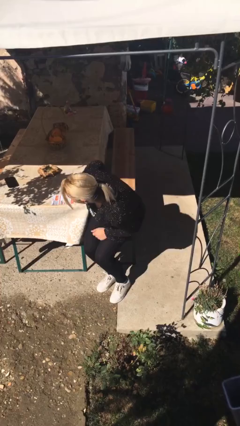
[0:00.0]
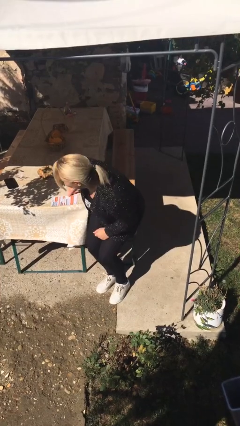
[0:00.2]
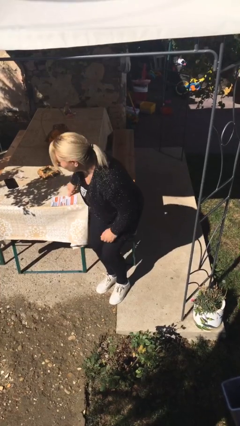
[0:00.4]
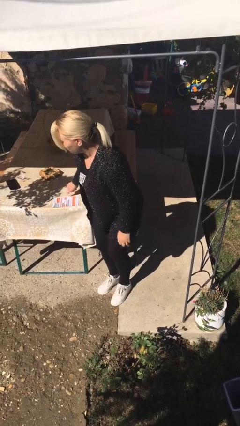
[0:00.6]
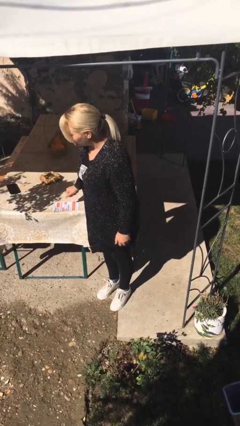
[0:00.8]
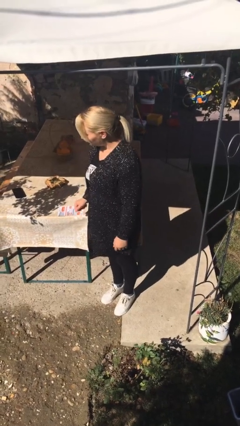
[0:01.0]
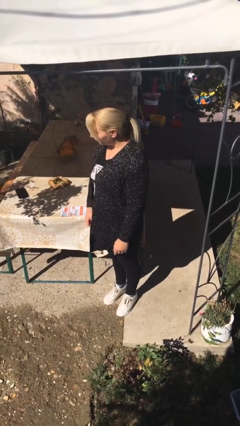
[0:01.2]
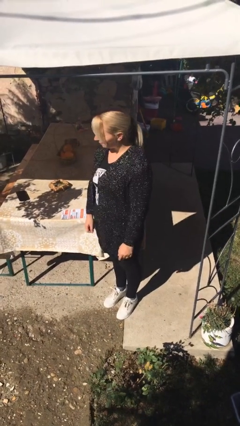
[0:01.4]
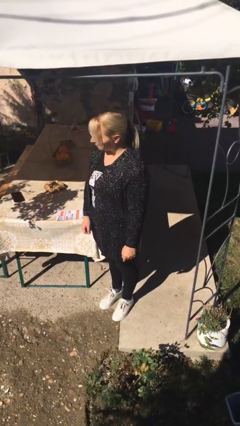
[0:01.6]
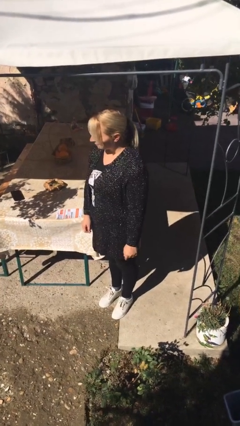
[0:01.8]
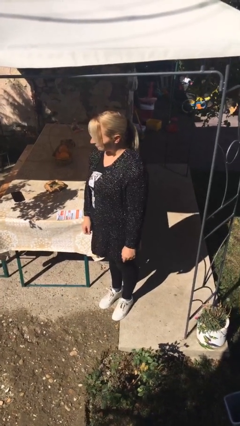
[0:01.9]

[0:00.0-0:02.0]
person stands up

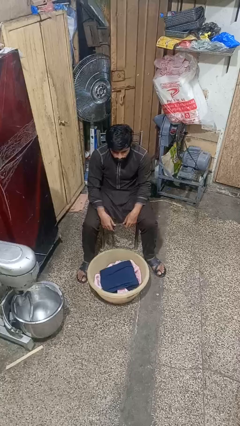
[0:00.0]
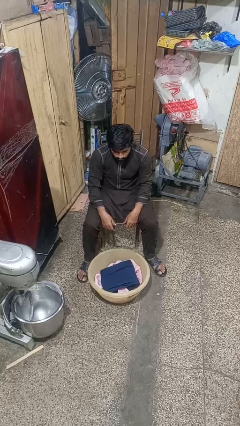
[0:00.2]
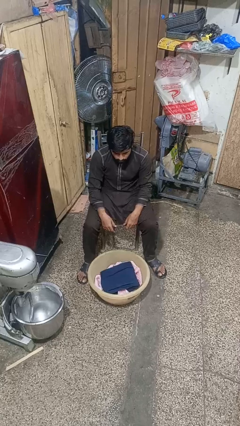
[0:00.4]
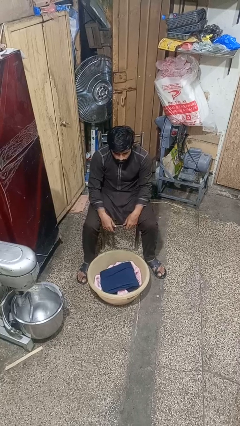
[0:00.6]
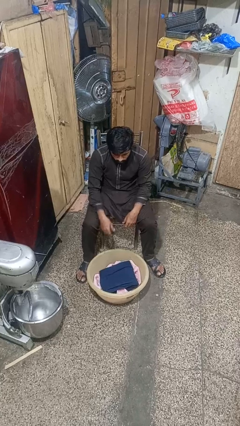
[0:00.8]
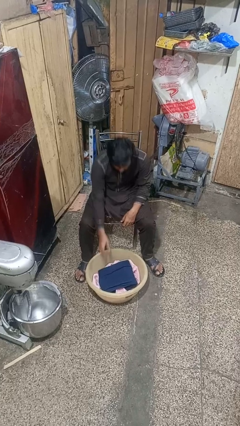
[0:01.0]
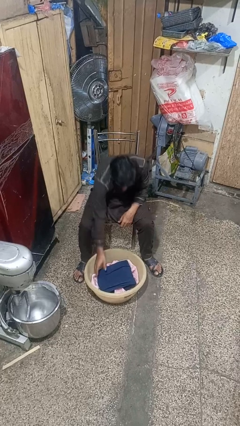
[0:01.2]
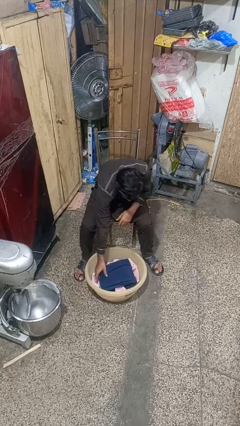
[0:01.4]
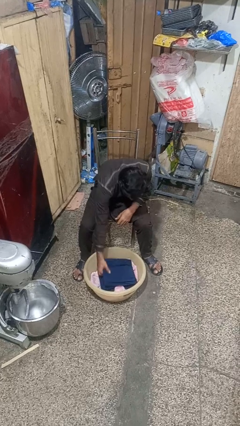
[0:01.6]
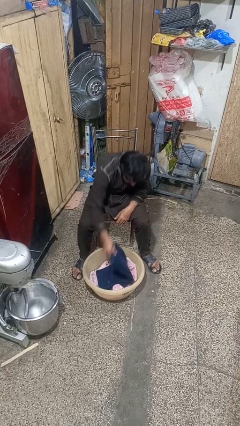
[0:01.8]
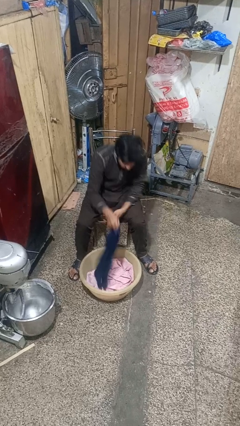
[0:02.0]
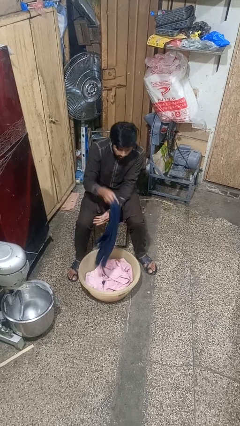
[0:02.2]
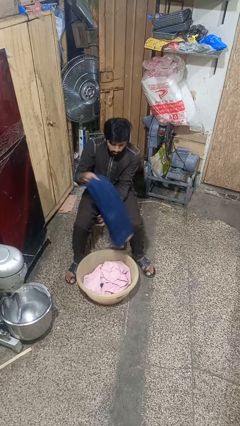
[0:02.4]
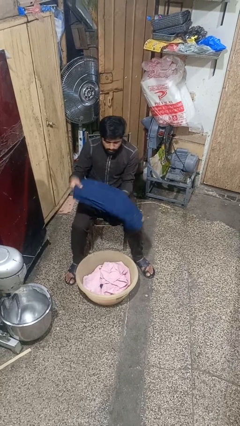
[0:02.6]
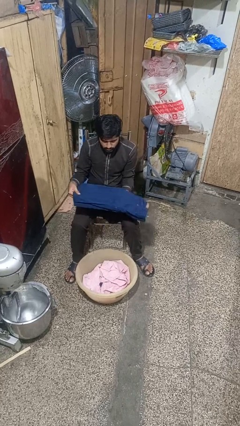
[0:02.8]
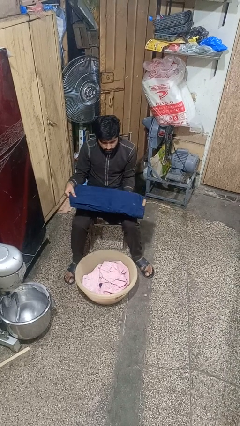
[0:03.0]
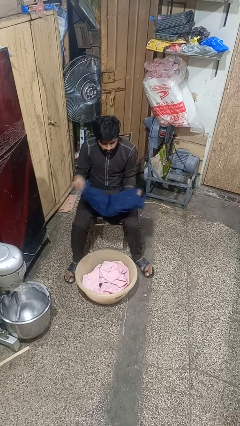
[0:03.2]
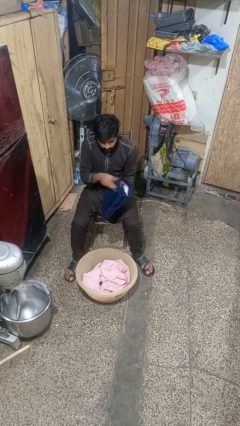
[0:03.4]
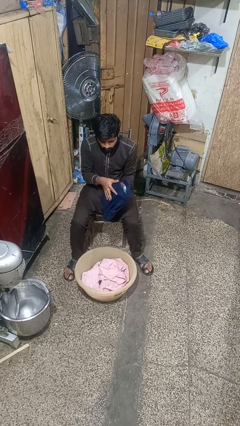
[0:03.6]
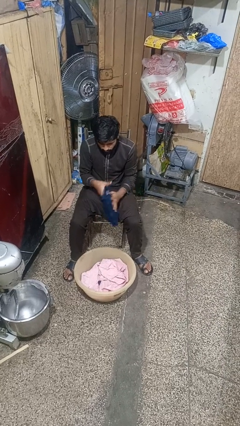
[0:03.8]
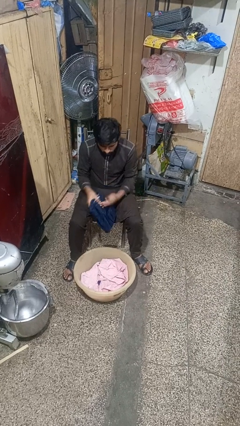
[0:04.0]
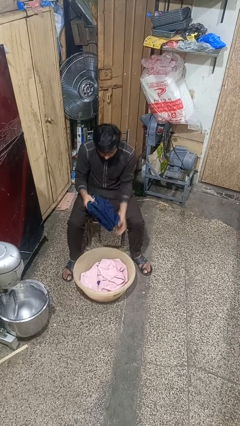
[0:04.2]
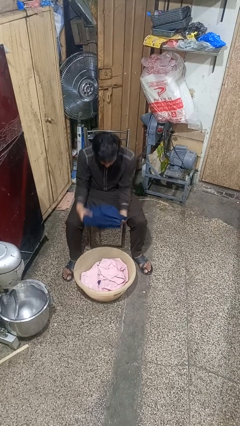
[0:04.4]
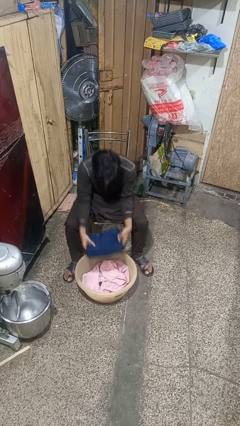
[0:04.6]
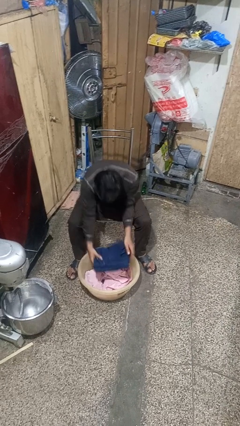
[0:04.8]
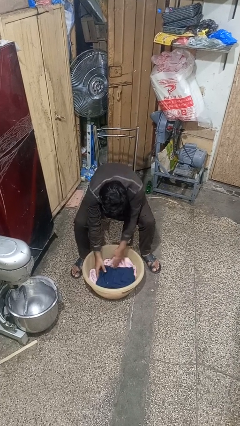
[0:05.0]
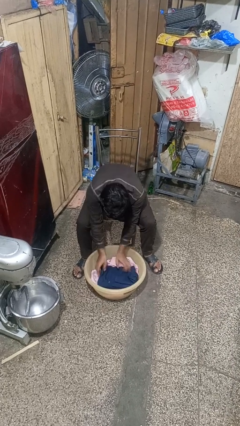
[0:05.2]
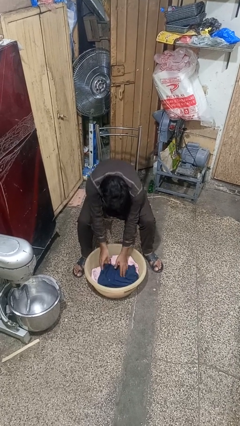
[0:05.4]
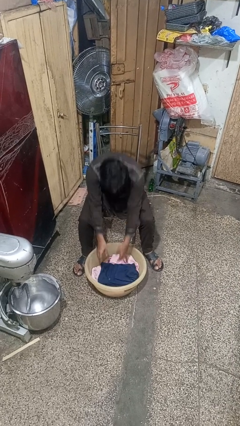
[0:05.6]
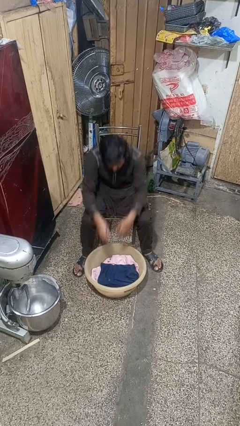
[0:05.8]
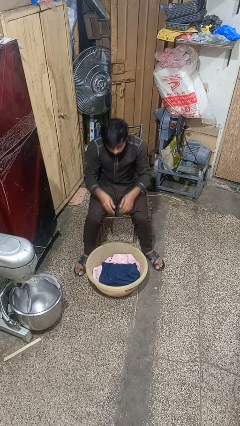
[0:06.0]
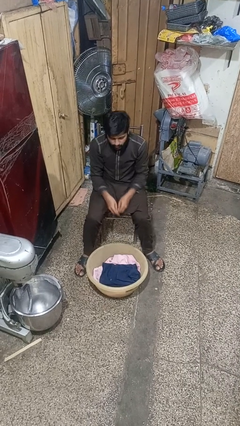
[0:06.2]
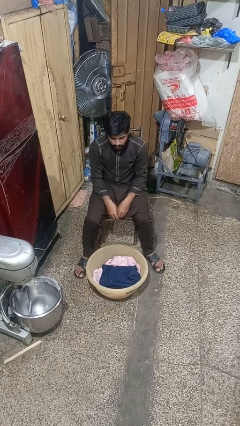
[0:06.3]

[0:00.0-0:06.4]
person folds pants

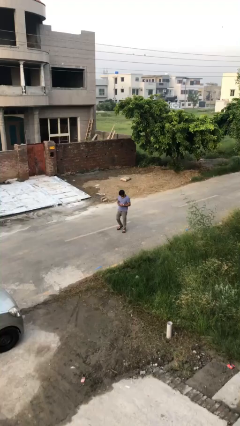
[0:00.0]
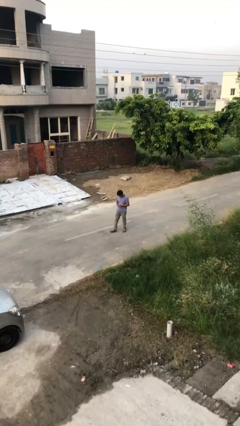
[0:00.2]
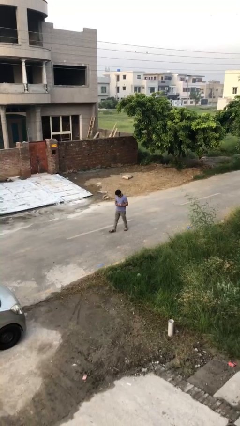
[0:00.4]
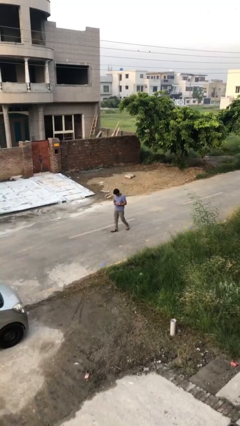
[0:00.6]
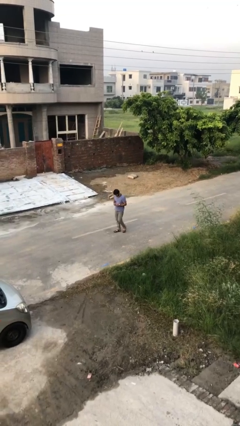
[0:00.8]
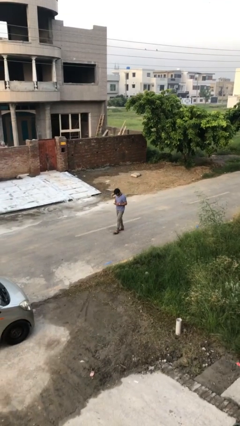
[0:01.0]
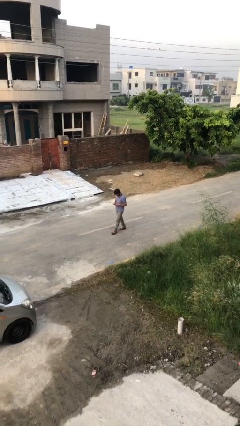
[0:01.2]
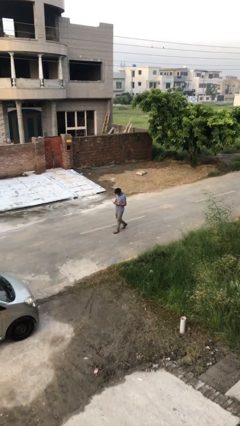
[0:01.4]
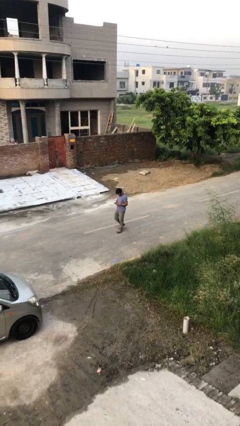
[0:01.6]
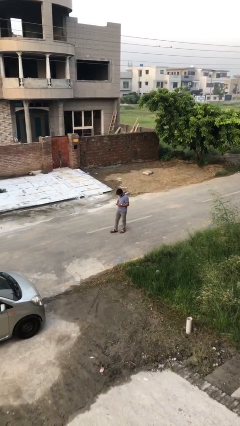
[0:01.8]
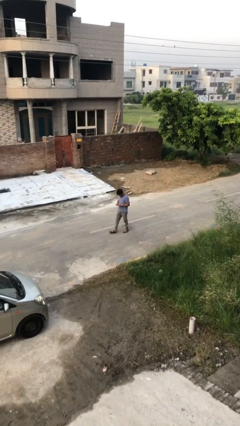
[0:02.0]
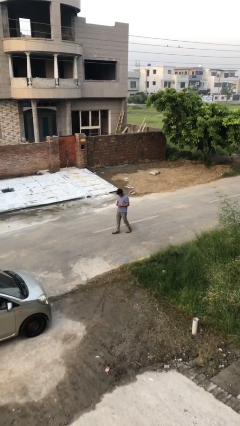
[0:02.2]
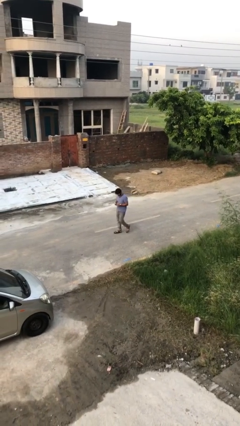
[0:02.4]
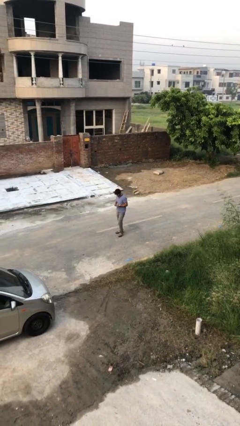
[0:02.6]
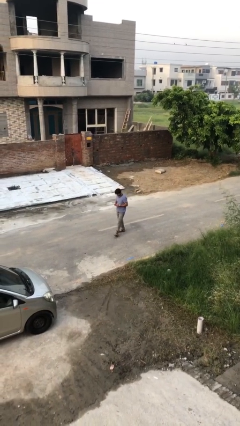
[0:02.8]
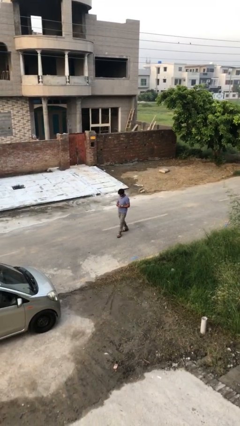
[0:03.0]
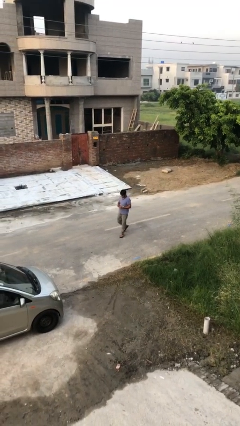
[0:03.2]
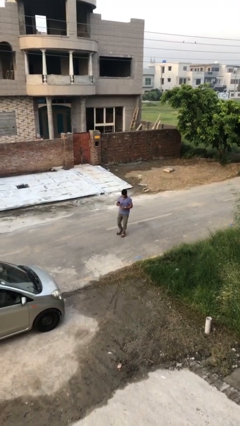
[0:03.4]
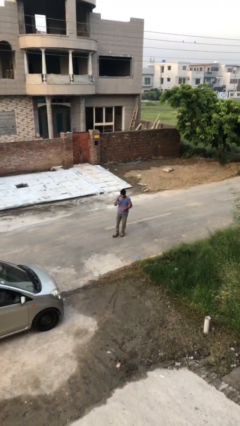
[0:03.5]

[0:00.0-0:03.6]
person texts on phone

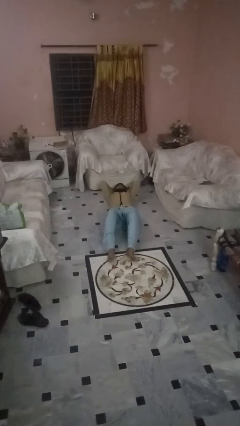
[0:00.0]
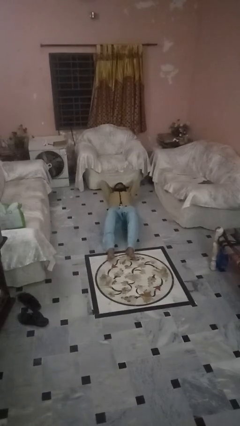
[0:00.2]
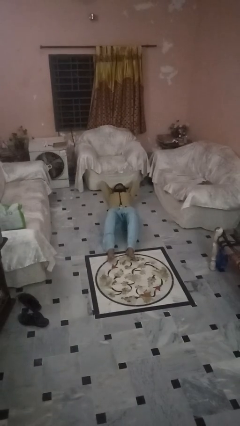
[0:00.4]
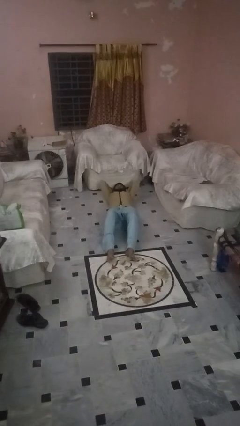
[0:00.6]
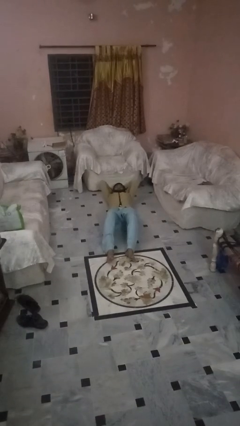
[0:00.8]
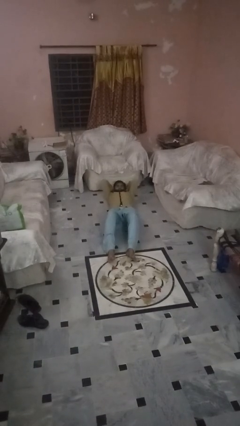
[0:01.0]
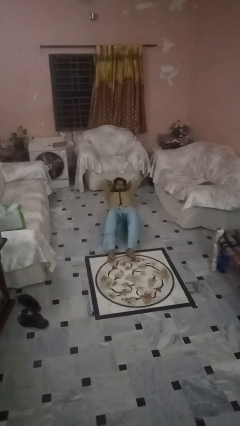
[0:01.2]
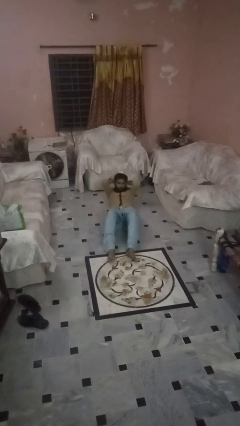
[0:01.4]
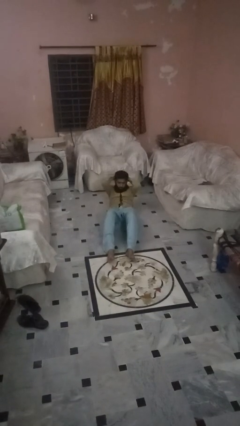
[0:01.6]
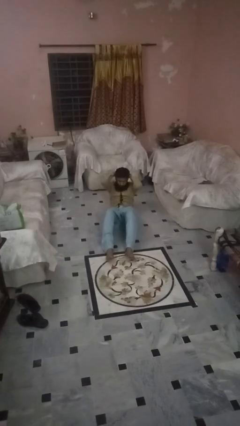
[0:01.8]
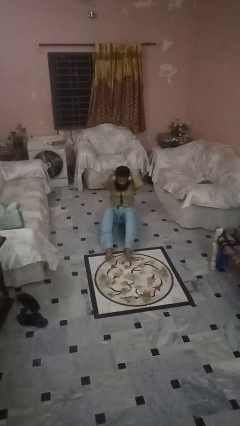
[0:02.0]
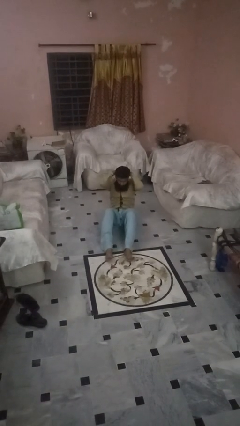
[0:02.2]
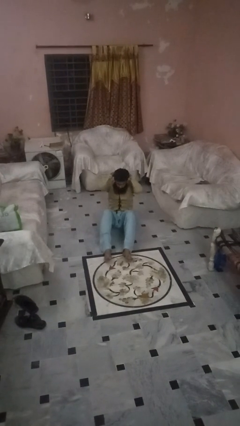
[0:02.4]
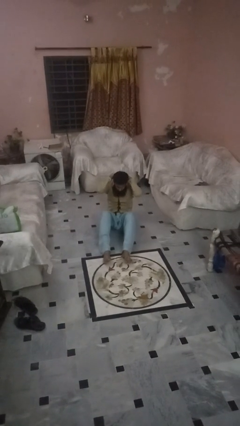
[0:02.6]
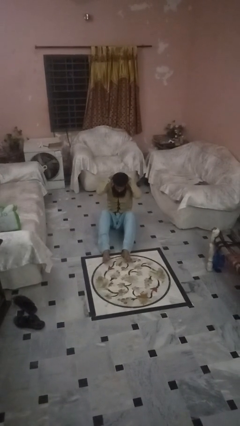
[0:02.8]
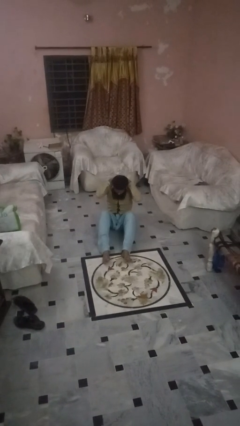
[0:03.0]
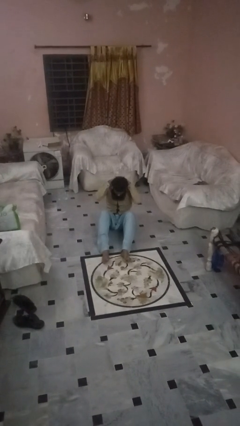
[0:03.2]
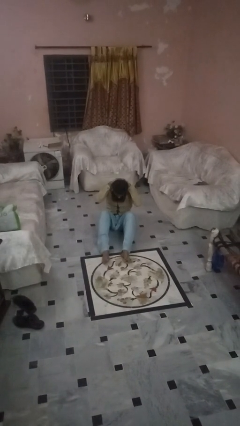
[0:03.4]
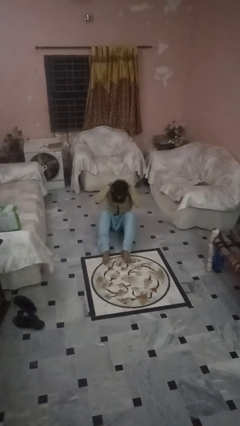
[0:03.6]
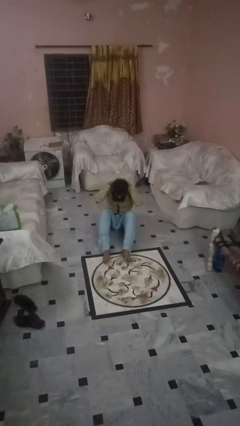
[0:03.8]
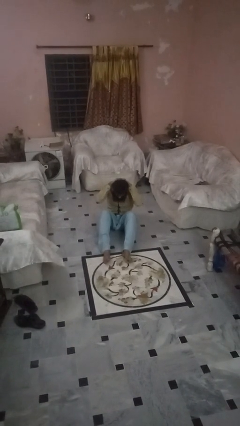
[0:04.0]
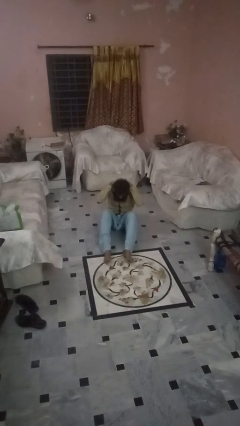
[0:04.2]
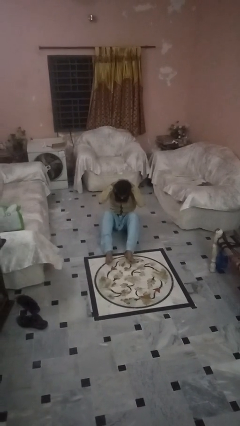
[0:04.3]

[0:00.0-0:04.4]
person exercises with situp

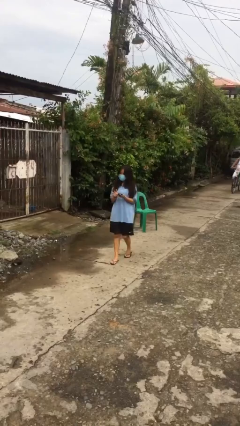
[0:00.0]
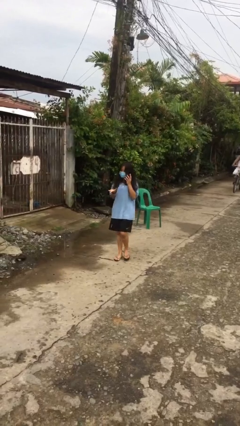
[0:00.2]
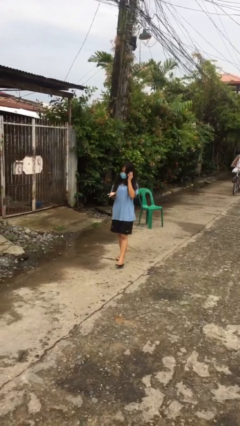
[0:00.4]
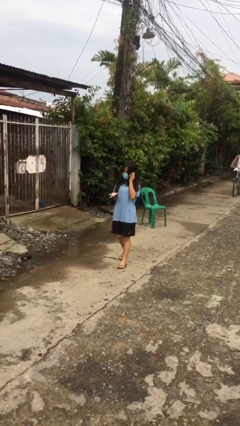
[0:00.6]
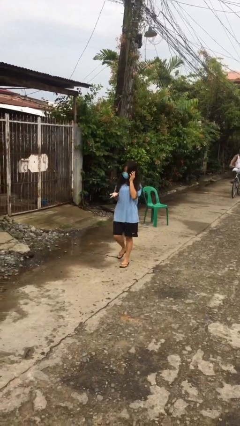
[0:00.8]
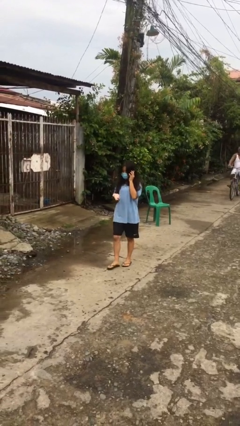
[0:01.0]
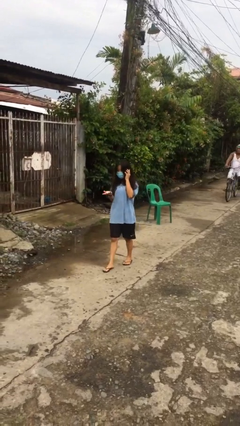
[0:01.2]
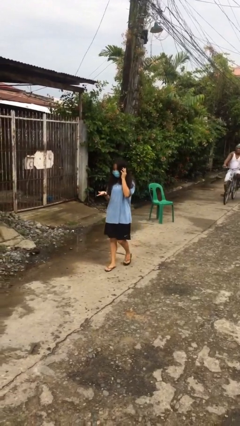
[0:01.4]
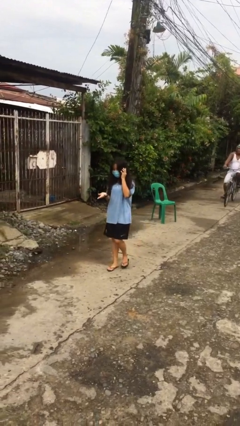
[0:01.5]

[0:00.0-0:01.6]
person talks on phone
